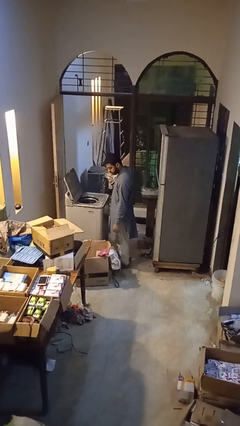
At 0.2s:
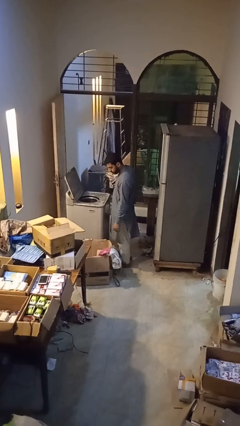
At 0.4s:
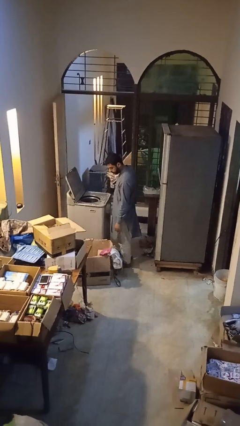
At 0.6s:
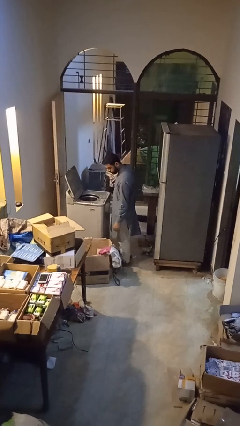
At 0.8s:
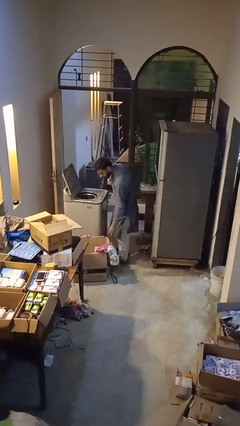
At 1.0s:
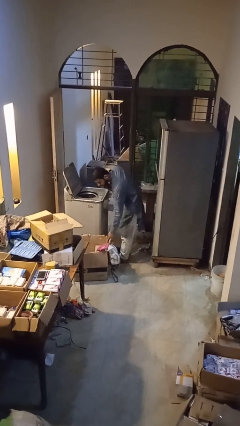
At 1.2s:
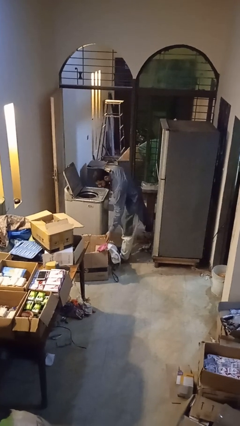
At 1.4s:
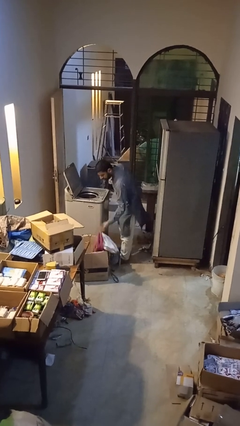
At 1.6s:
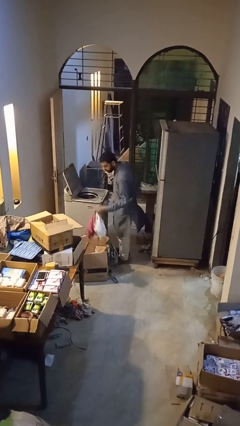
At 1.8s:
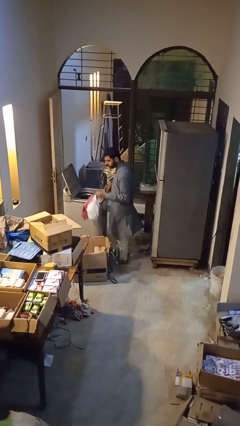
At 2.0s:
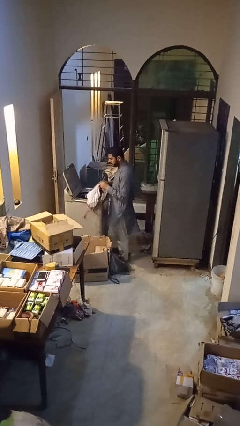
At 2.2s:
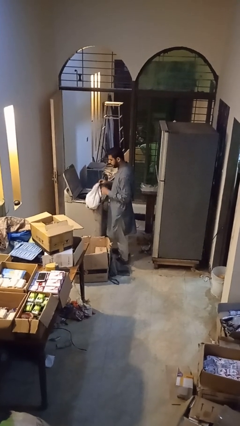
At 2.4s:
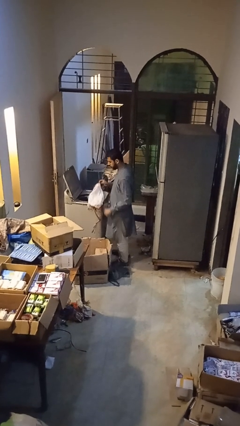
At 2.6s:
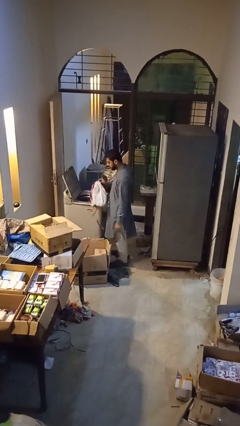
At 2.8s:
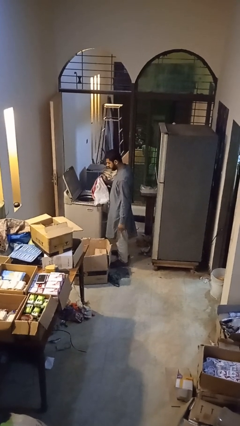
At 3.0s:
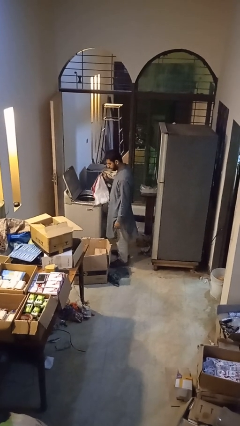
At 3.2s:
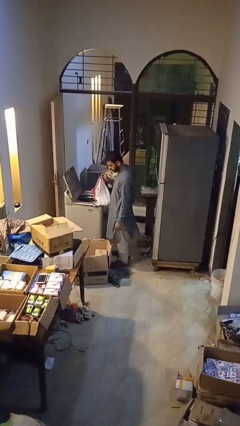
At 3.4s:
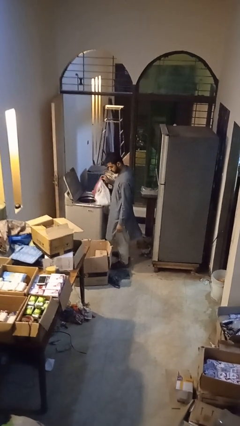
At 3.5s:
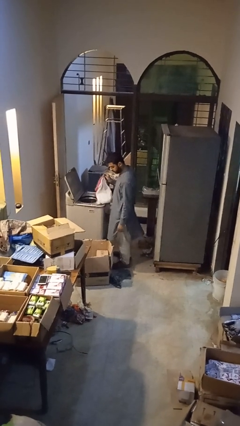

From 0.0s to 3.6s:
person unloads clotheswasher

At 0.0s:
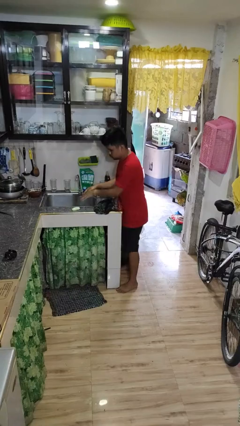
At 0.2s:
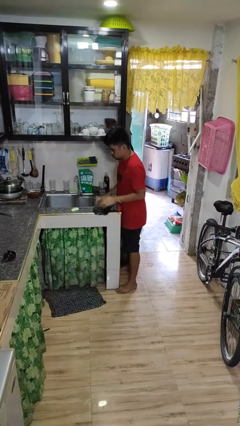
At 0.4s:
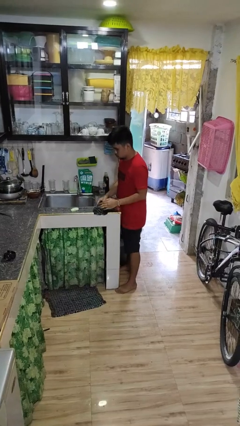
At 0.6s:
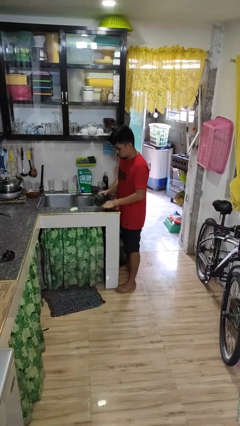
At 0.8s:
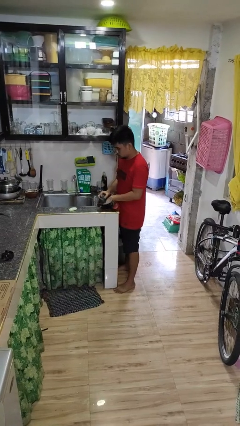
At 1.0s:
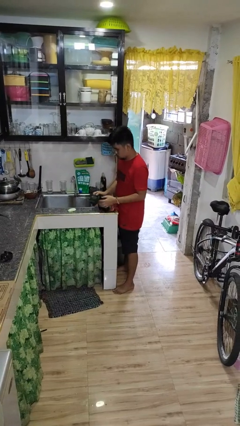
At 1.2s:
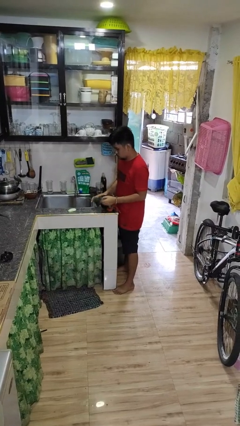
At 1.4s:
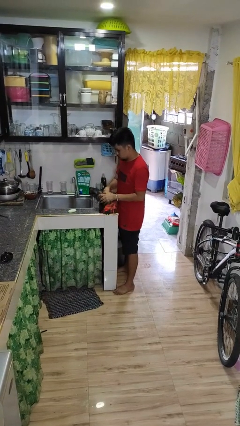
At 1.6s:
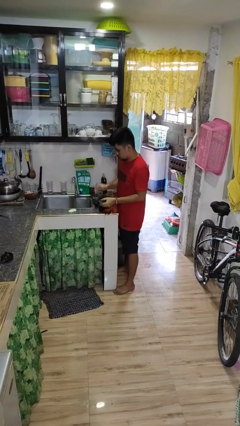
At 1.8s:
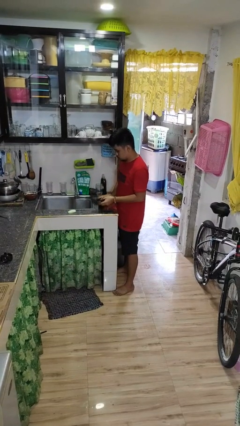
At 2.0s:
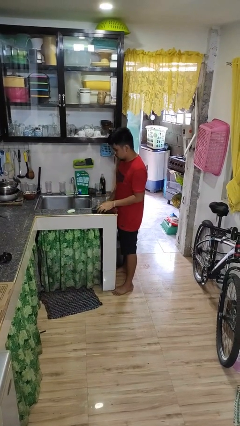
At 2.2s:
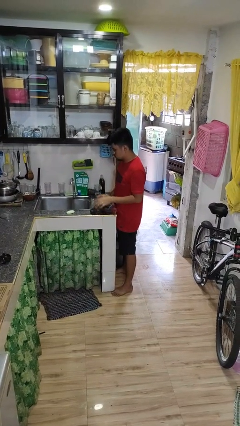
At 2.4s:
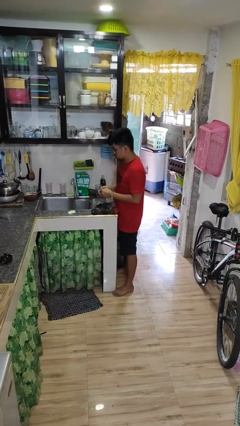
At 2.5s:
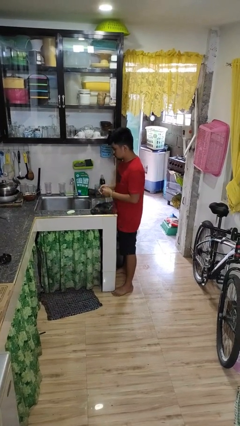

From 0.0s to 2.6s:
person dries hands with towel

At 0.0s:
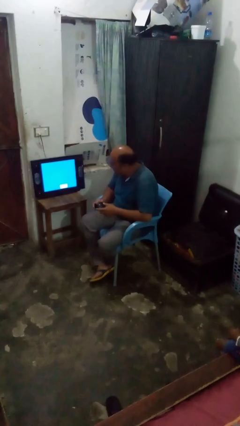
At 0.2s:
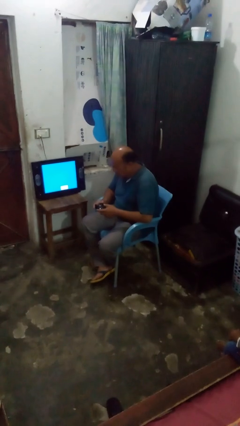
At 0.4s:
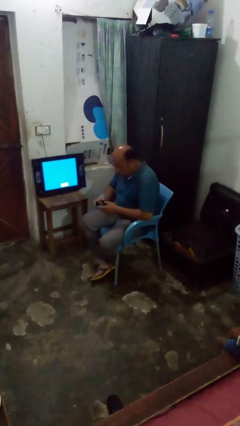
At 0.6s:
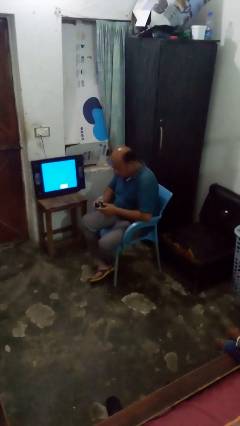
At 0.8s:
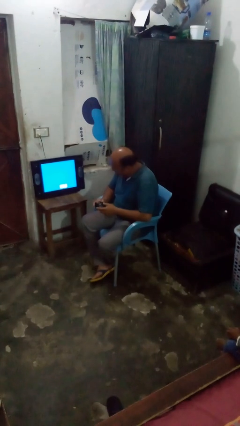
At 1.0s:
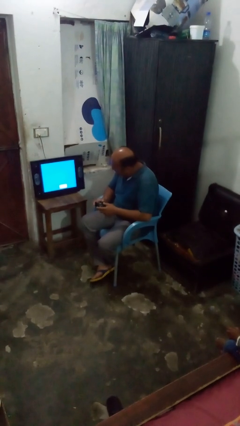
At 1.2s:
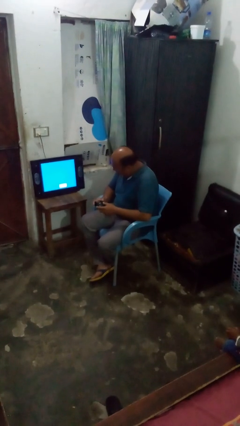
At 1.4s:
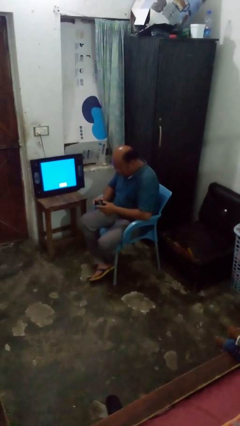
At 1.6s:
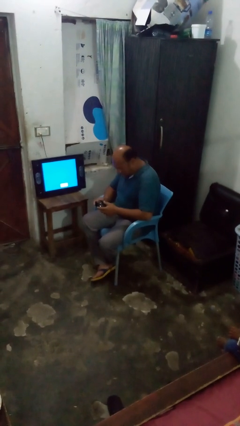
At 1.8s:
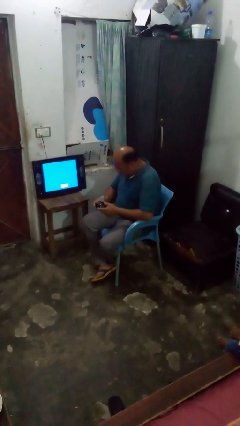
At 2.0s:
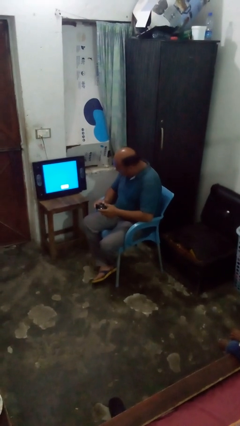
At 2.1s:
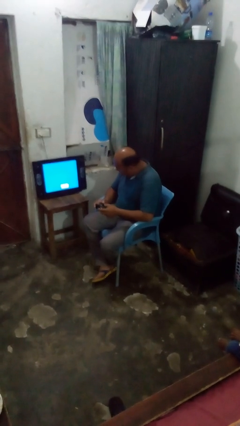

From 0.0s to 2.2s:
person interacts with handheld game

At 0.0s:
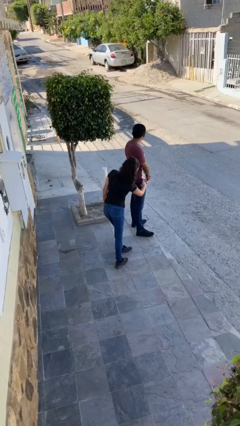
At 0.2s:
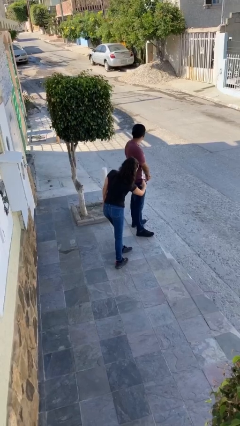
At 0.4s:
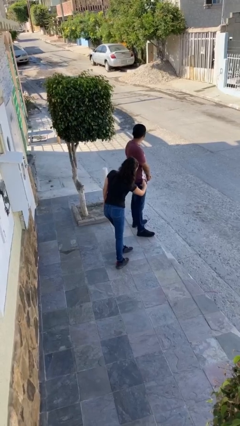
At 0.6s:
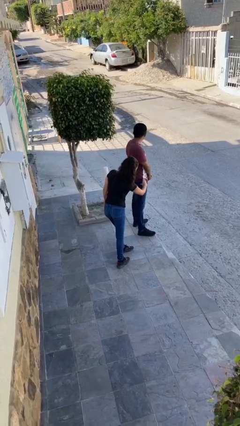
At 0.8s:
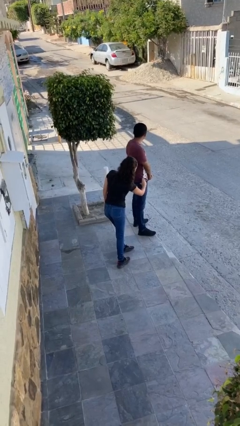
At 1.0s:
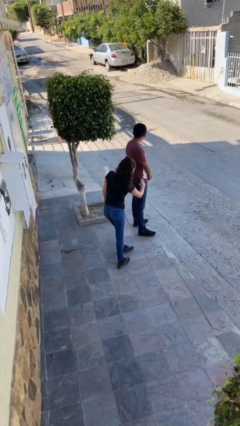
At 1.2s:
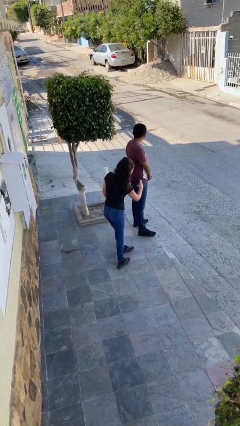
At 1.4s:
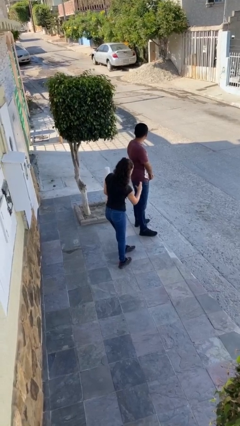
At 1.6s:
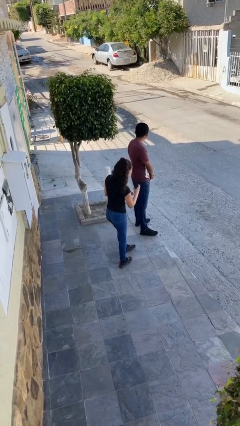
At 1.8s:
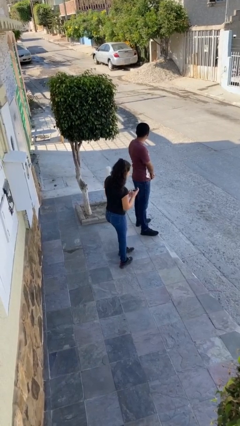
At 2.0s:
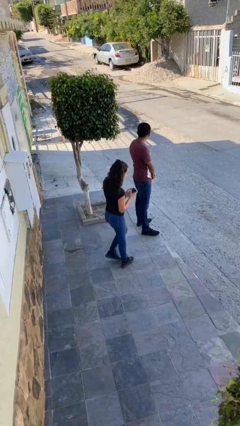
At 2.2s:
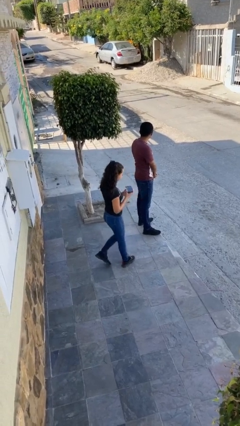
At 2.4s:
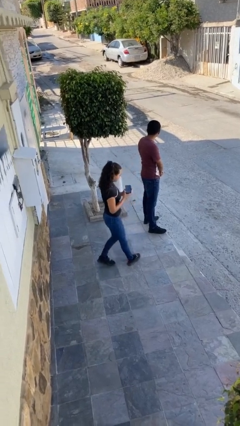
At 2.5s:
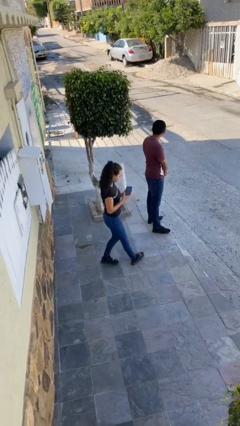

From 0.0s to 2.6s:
person steals object from person

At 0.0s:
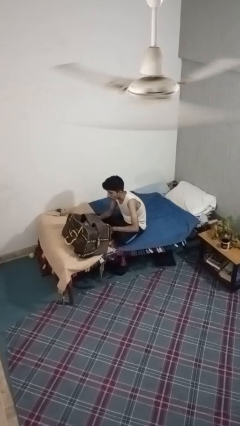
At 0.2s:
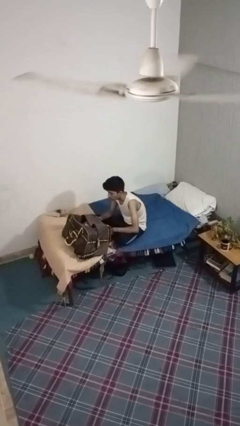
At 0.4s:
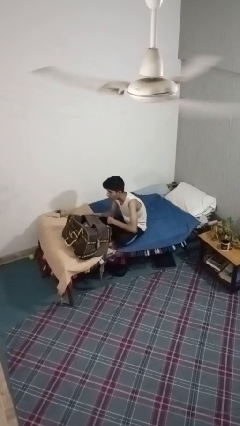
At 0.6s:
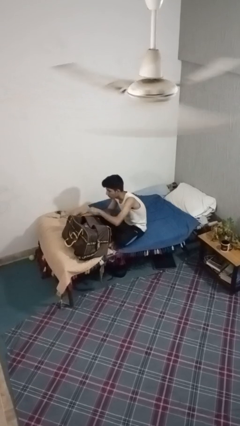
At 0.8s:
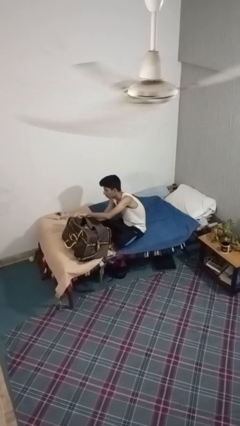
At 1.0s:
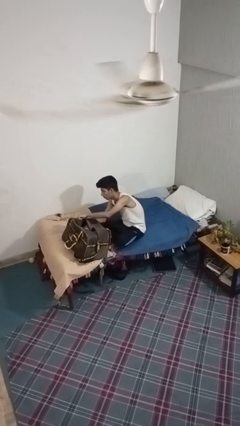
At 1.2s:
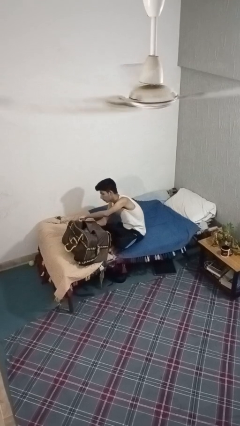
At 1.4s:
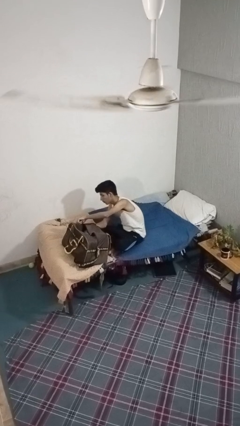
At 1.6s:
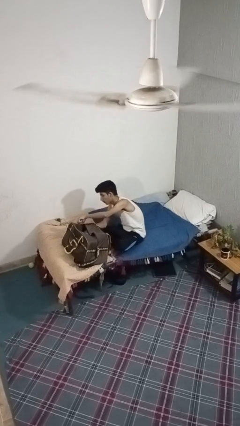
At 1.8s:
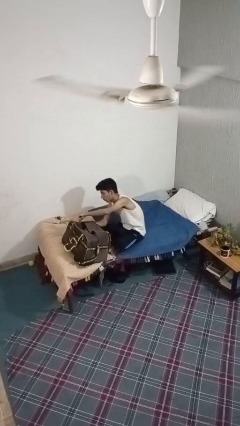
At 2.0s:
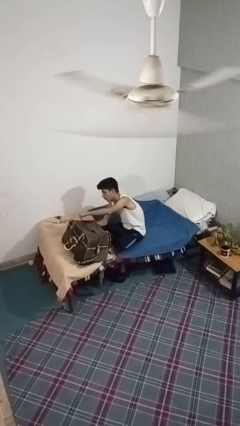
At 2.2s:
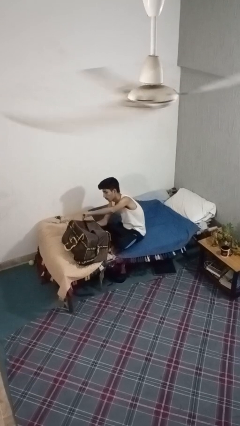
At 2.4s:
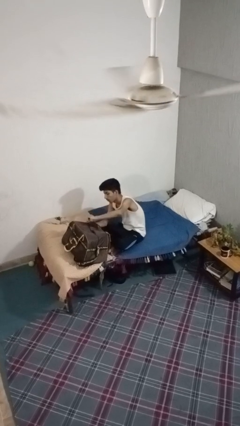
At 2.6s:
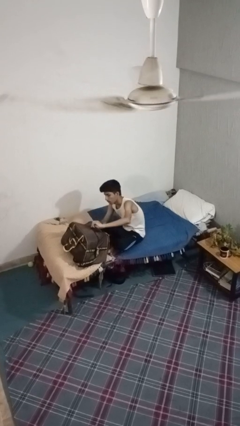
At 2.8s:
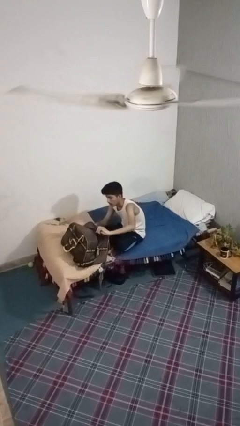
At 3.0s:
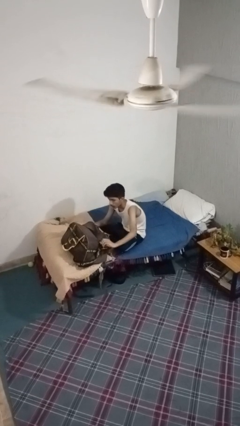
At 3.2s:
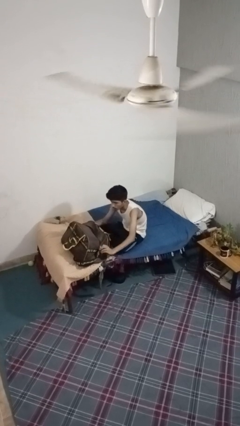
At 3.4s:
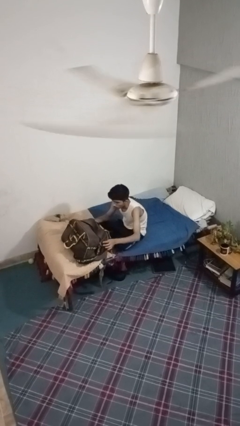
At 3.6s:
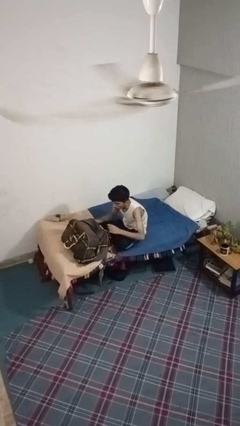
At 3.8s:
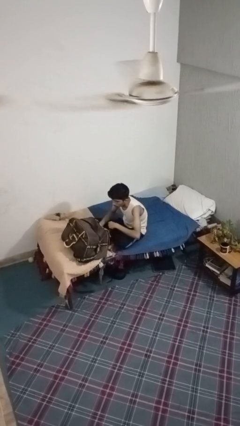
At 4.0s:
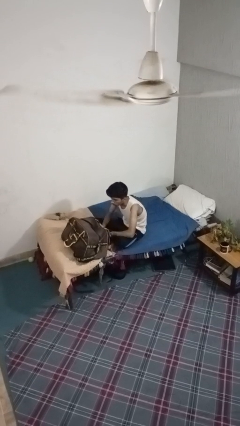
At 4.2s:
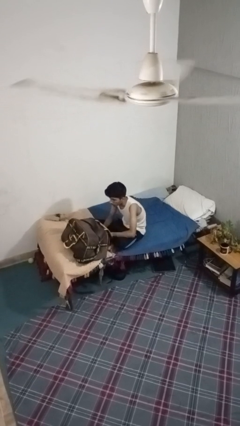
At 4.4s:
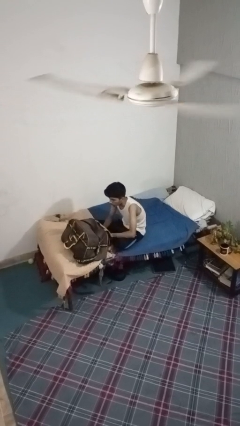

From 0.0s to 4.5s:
person closes suitcase

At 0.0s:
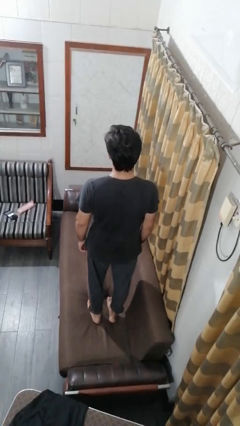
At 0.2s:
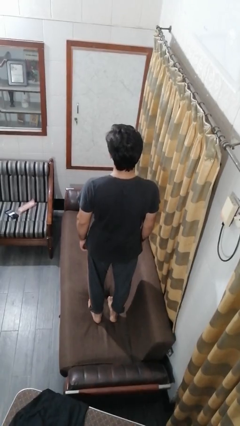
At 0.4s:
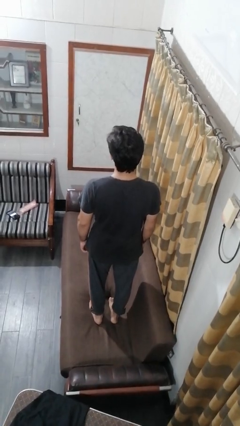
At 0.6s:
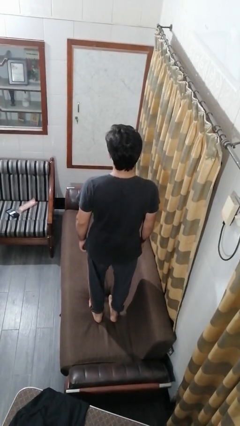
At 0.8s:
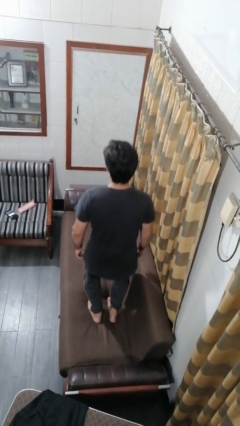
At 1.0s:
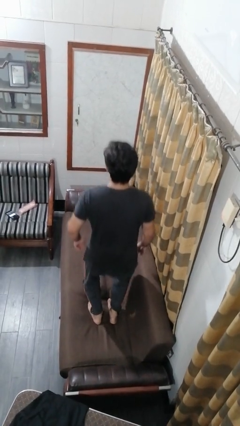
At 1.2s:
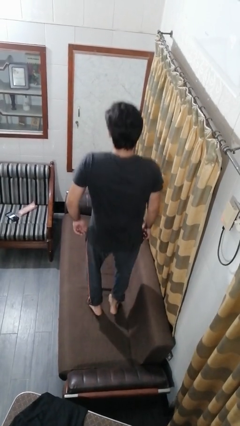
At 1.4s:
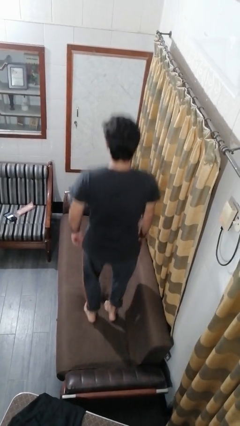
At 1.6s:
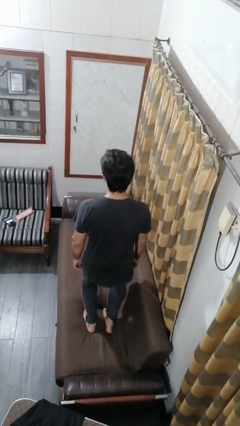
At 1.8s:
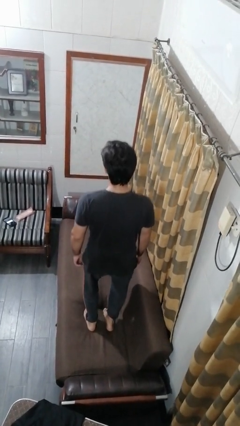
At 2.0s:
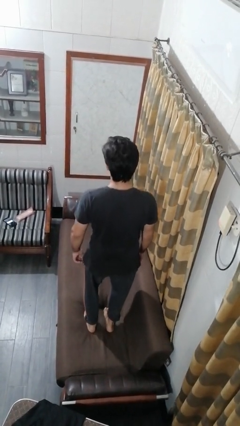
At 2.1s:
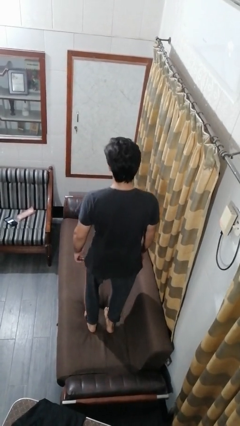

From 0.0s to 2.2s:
person jumps on couch

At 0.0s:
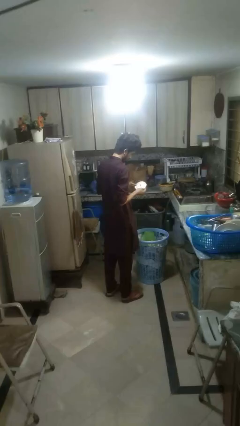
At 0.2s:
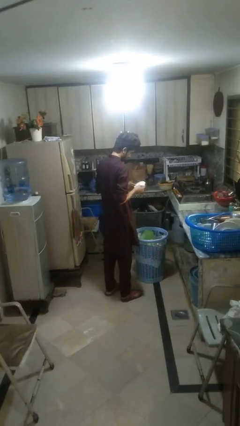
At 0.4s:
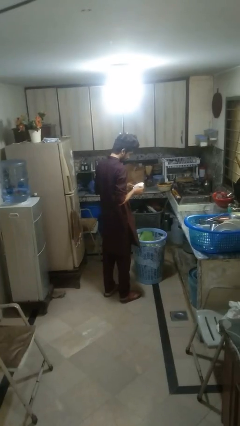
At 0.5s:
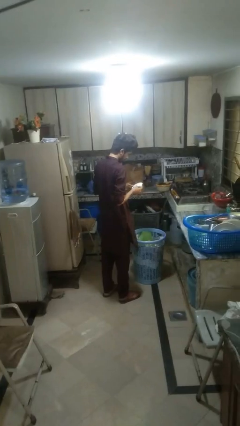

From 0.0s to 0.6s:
person puts object into basket
